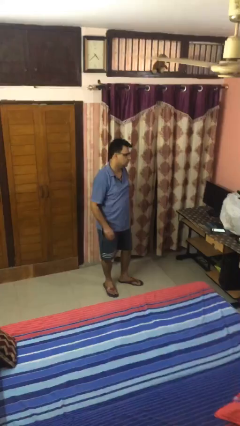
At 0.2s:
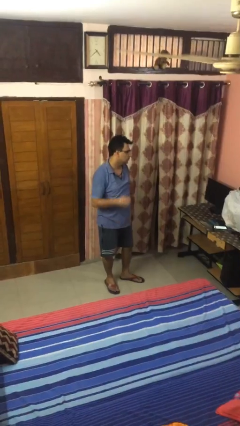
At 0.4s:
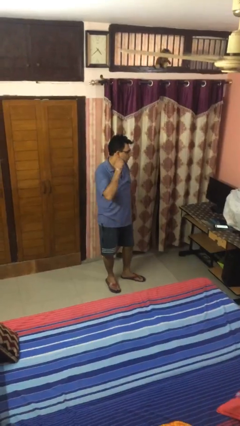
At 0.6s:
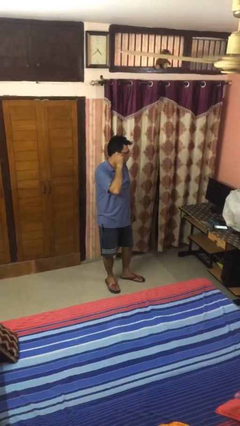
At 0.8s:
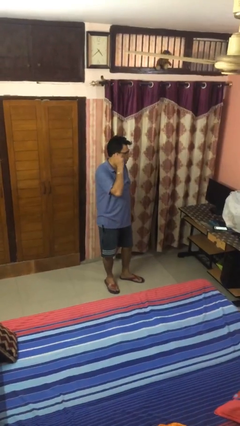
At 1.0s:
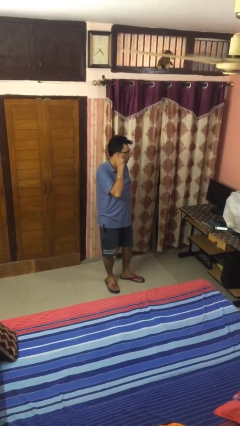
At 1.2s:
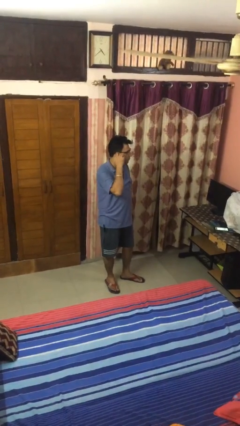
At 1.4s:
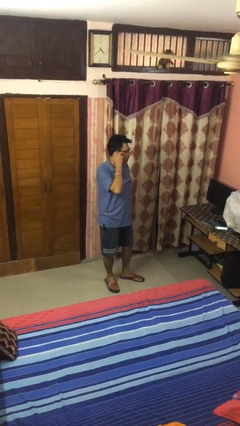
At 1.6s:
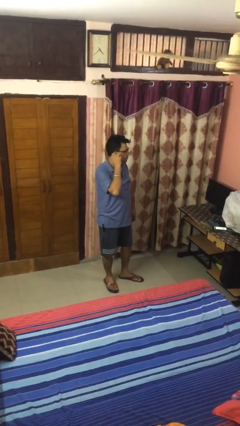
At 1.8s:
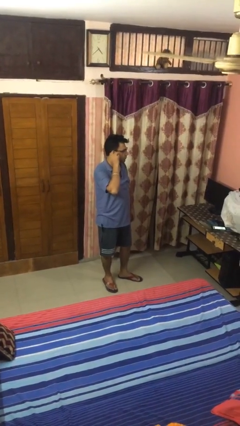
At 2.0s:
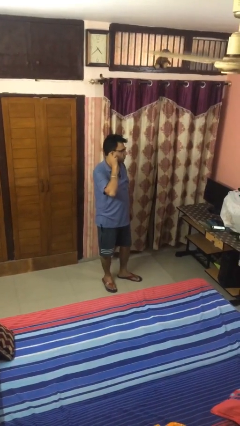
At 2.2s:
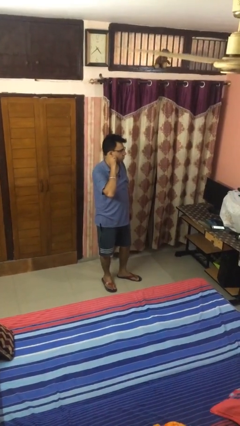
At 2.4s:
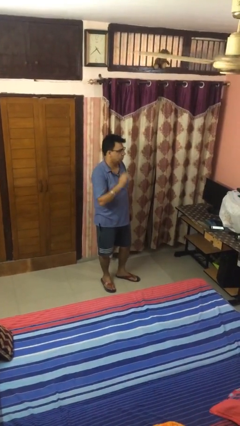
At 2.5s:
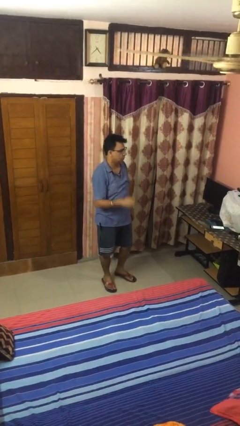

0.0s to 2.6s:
person touches earlobe

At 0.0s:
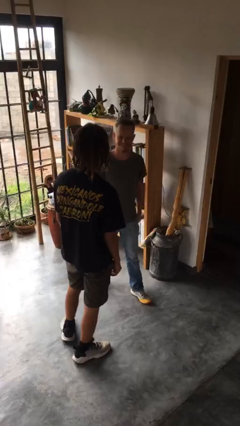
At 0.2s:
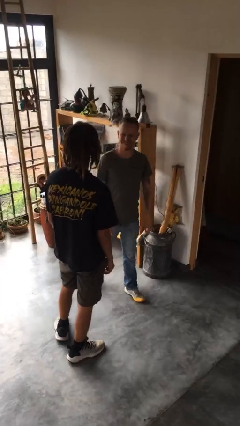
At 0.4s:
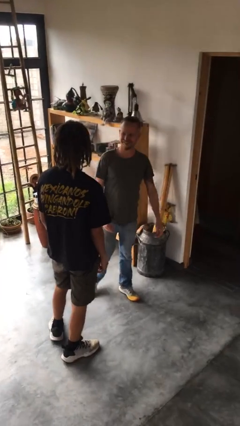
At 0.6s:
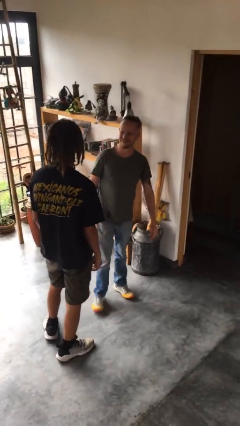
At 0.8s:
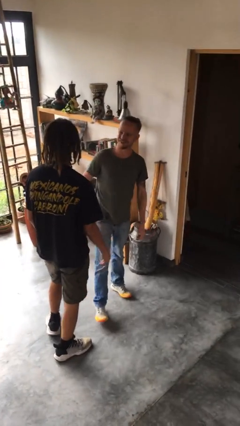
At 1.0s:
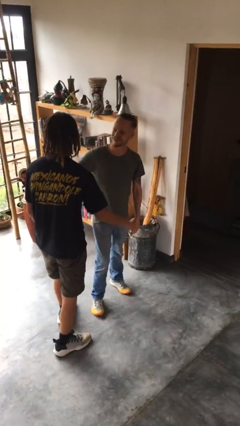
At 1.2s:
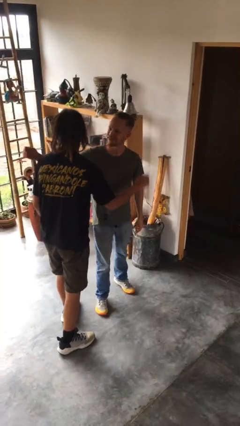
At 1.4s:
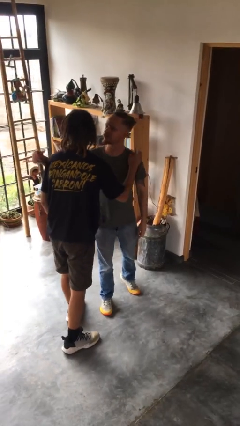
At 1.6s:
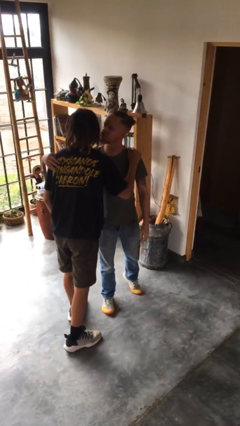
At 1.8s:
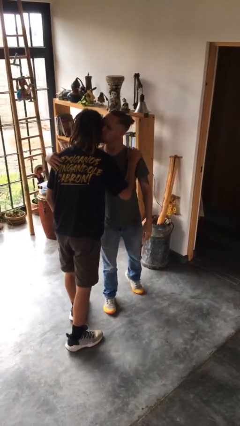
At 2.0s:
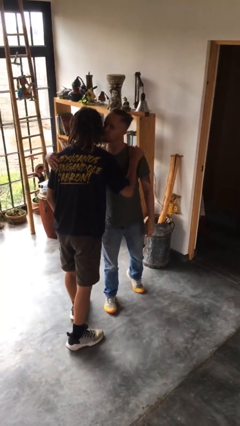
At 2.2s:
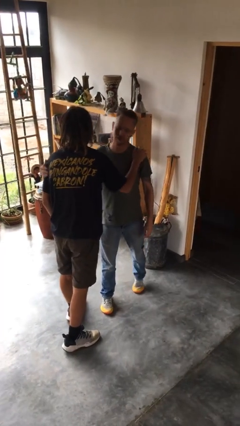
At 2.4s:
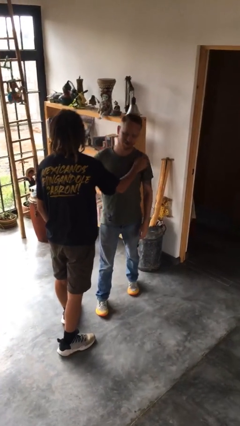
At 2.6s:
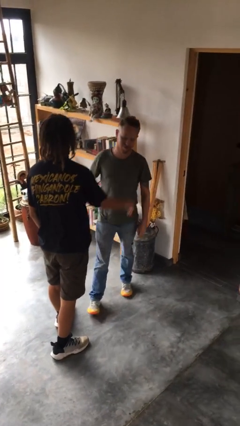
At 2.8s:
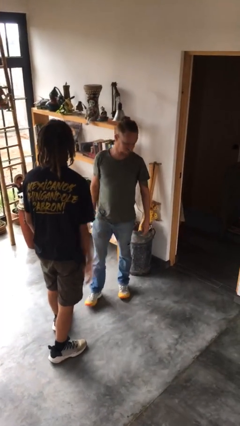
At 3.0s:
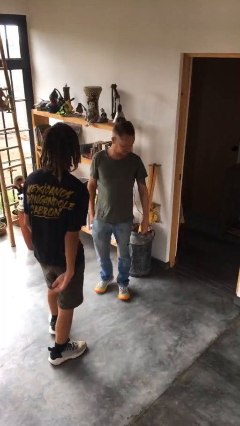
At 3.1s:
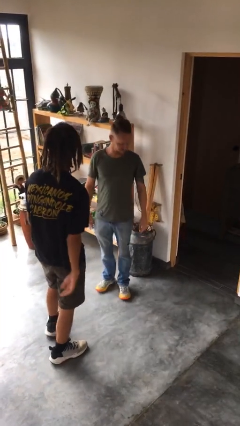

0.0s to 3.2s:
person kisses cheek of person

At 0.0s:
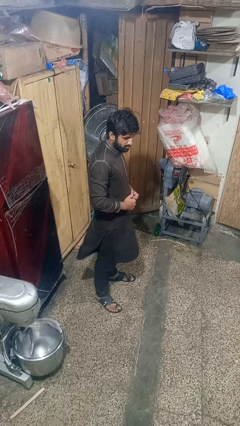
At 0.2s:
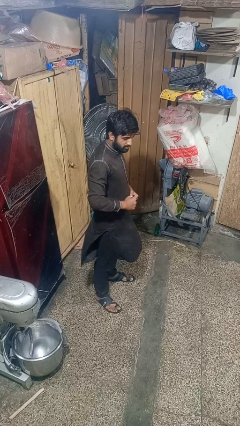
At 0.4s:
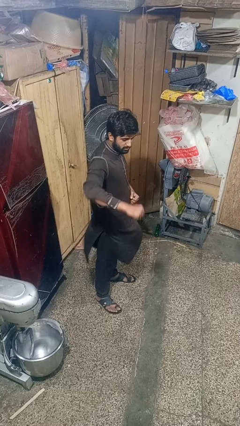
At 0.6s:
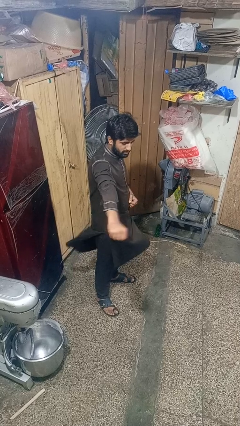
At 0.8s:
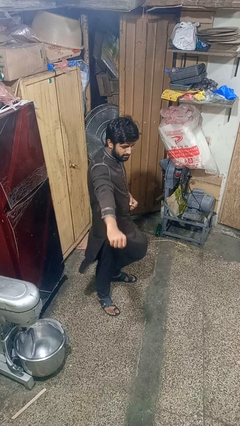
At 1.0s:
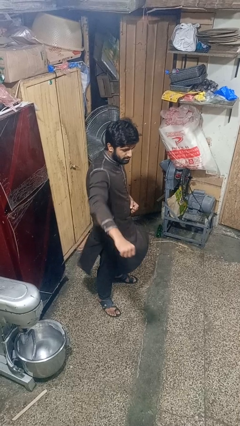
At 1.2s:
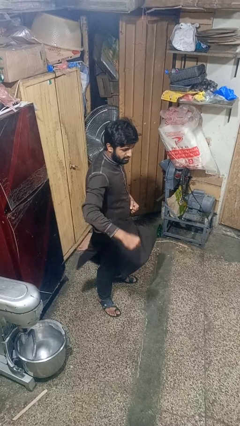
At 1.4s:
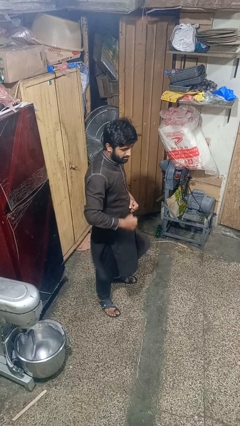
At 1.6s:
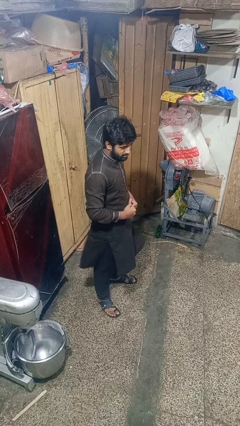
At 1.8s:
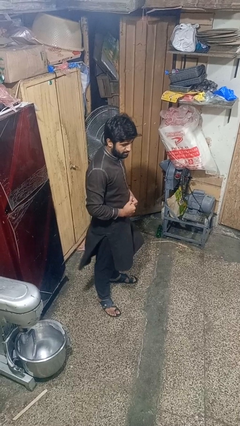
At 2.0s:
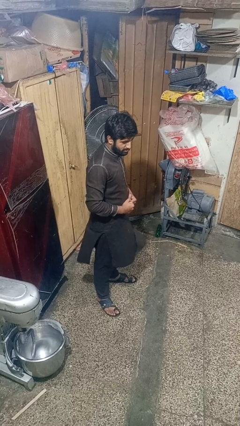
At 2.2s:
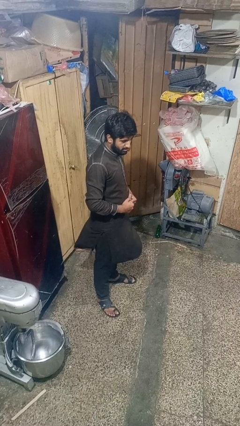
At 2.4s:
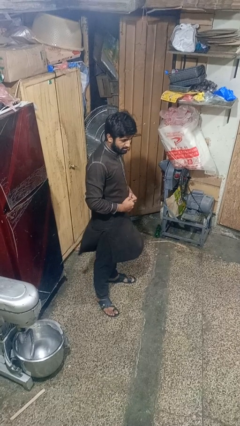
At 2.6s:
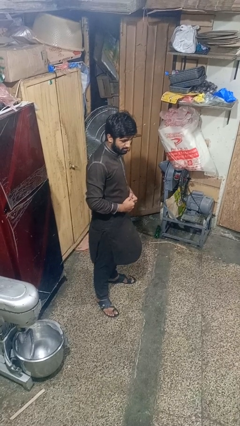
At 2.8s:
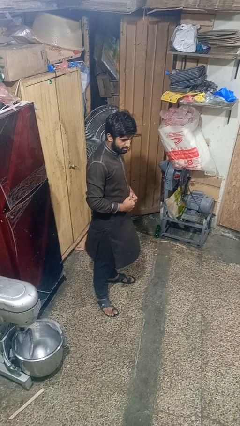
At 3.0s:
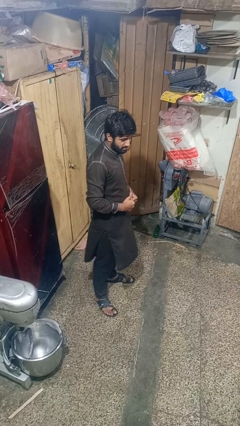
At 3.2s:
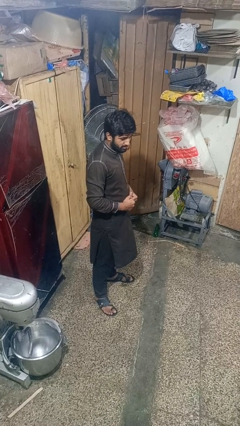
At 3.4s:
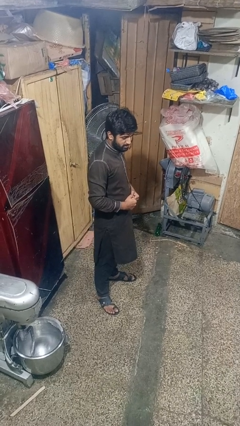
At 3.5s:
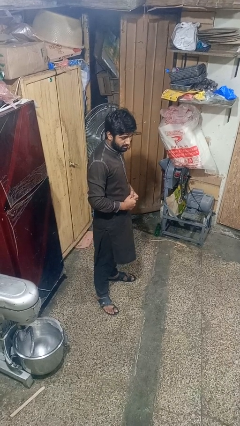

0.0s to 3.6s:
person karate chop

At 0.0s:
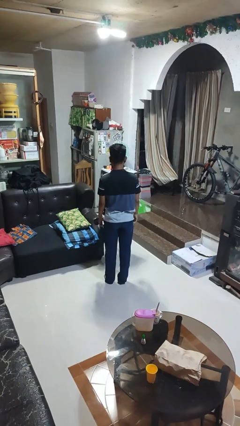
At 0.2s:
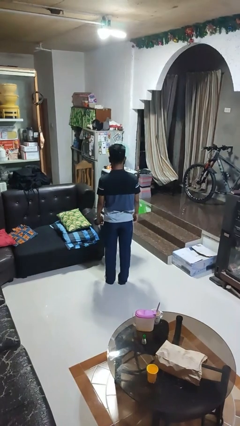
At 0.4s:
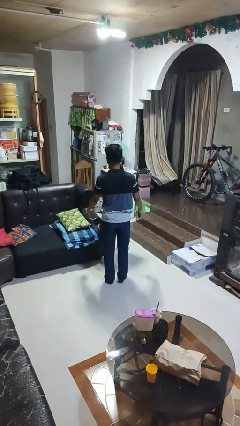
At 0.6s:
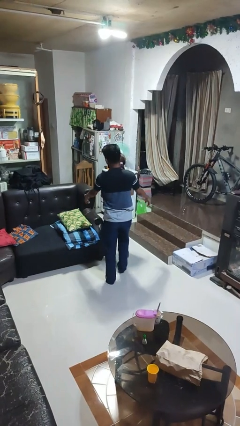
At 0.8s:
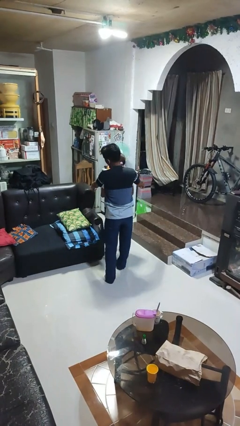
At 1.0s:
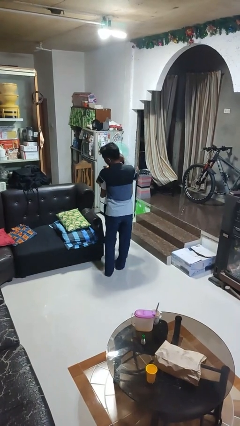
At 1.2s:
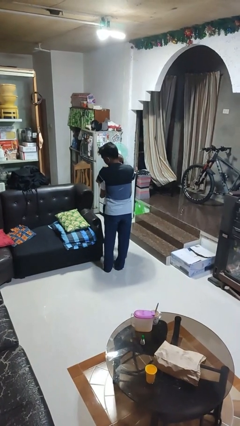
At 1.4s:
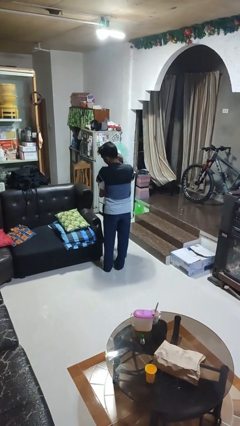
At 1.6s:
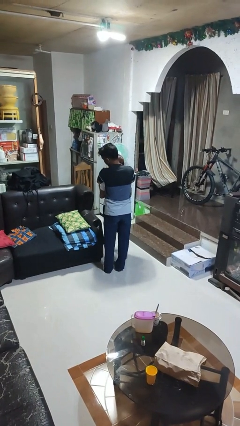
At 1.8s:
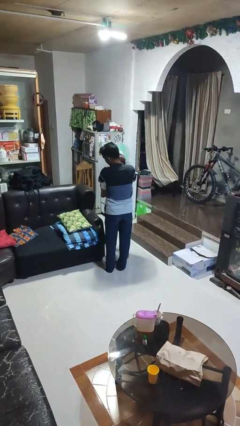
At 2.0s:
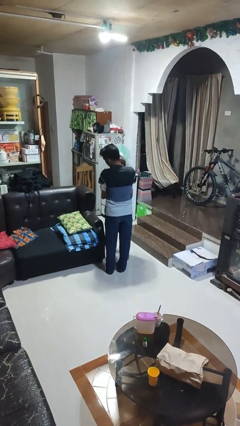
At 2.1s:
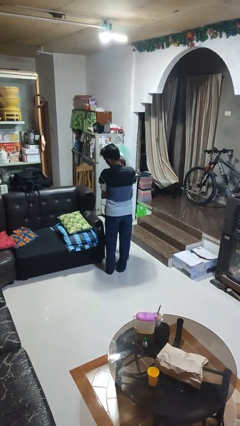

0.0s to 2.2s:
person hugs person from behind

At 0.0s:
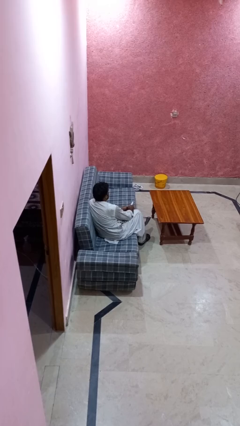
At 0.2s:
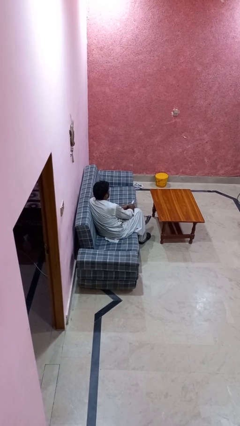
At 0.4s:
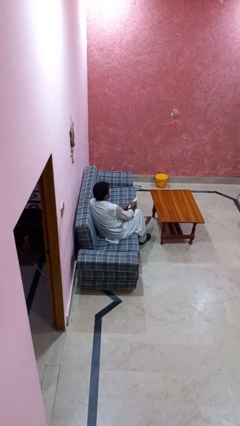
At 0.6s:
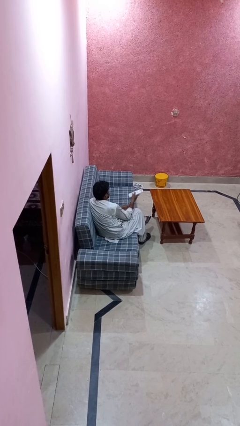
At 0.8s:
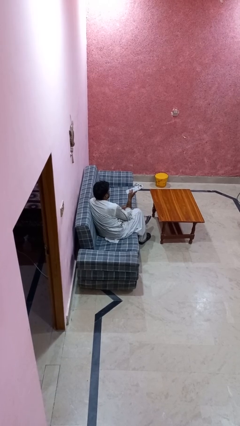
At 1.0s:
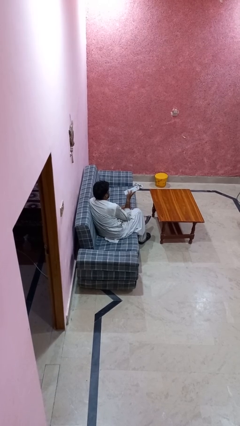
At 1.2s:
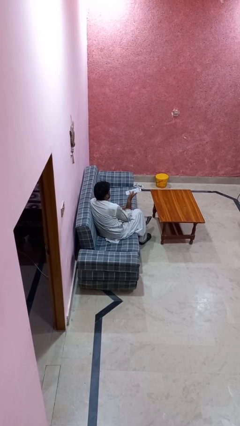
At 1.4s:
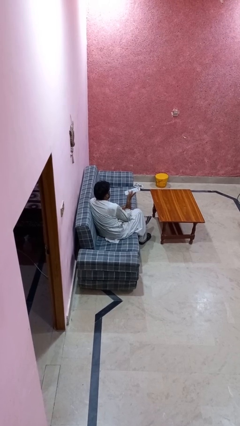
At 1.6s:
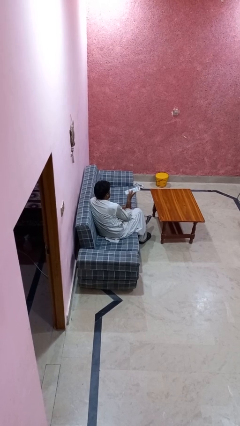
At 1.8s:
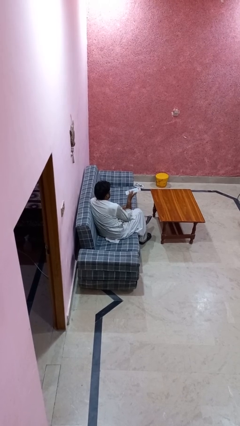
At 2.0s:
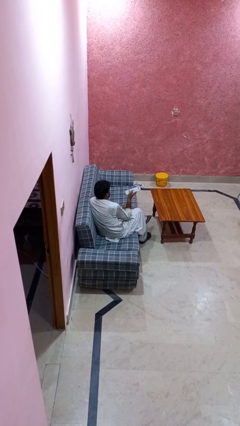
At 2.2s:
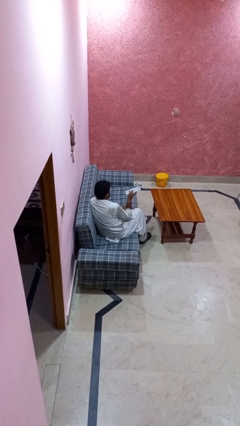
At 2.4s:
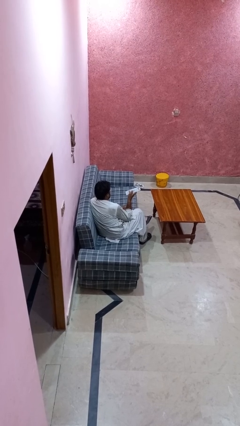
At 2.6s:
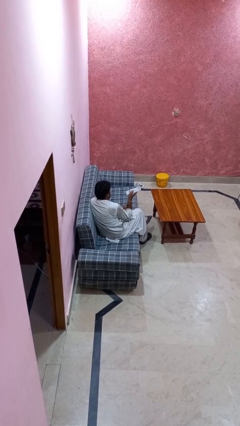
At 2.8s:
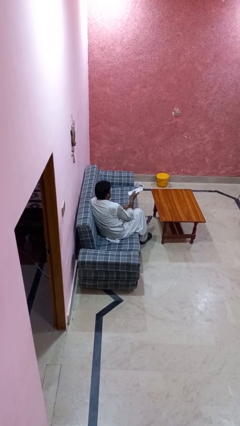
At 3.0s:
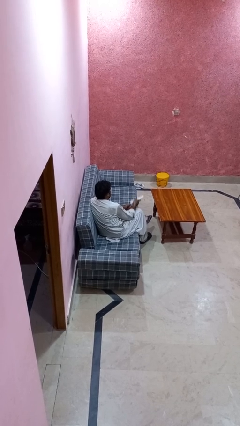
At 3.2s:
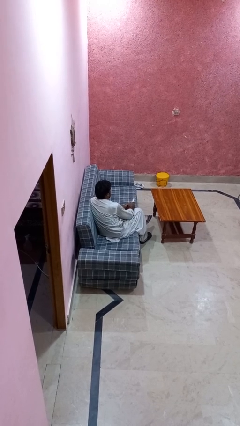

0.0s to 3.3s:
person uses television remote

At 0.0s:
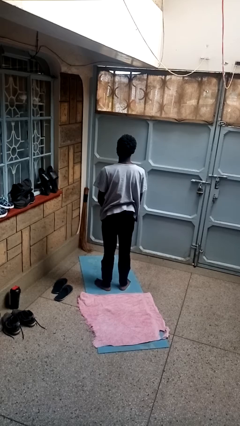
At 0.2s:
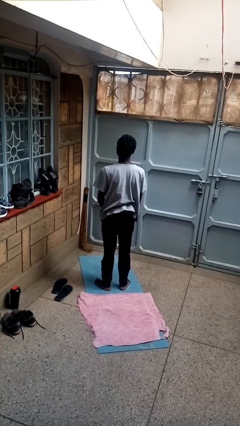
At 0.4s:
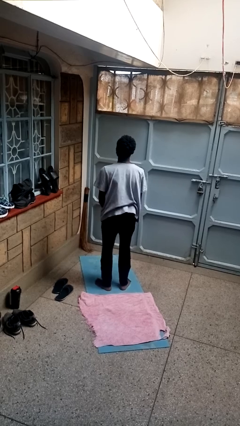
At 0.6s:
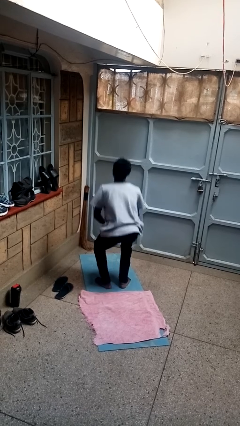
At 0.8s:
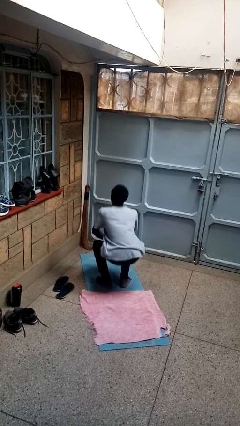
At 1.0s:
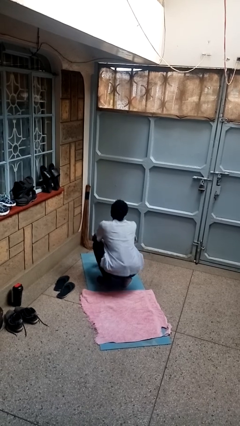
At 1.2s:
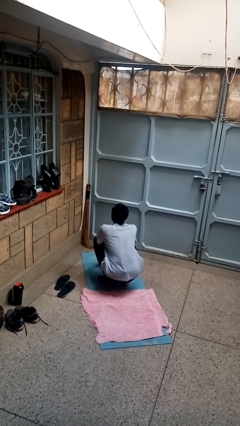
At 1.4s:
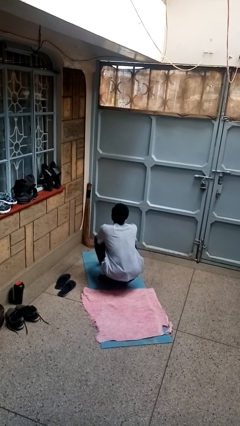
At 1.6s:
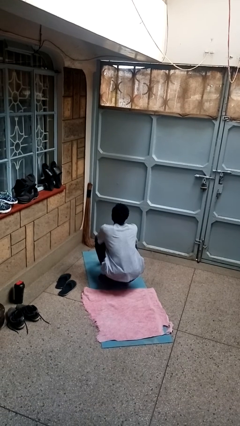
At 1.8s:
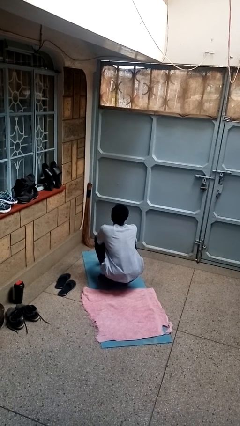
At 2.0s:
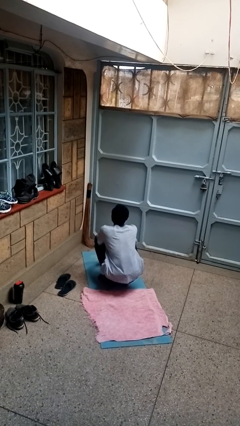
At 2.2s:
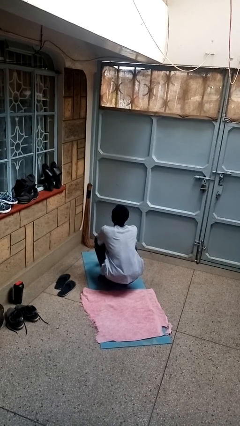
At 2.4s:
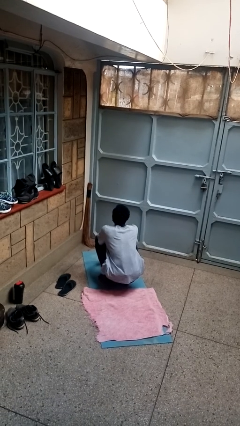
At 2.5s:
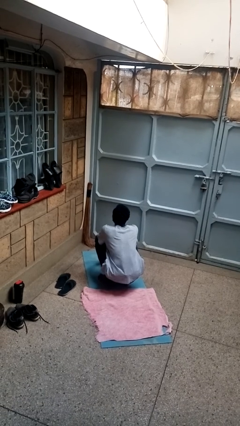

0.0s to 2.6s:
person squats

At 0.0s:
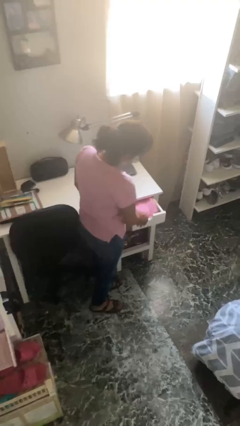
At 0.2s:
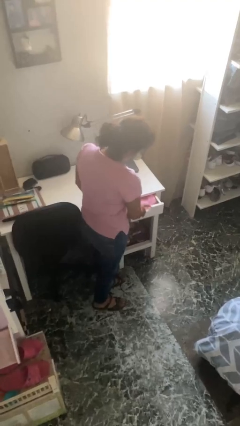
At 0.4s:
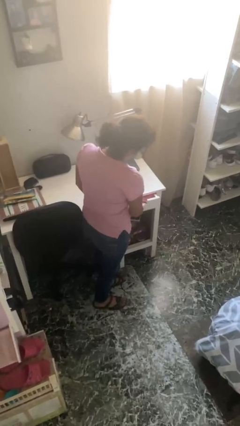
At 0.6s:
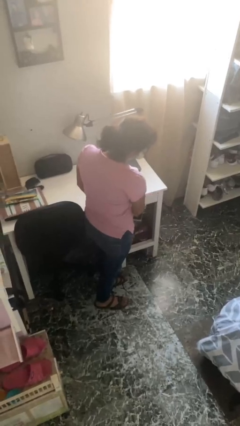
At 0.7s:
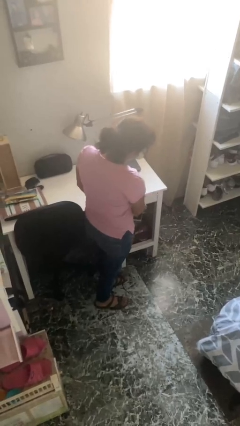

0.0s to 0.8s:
person closes dresser drawer
